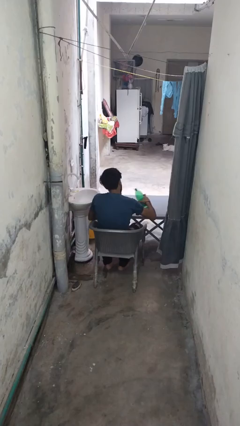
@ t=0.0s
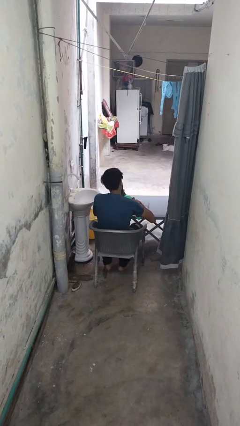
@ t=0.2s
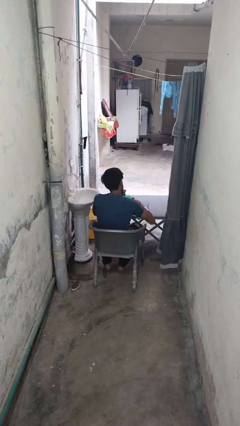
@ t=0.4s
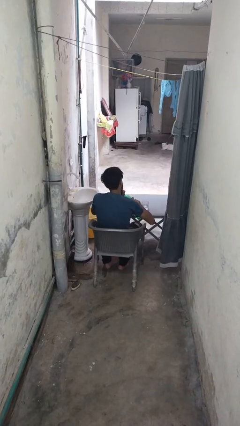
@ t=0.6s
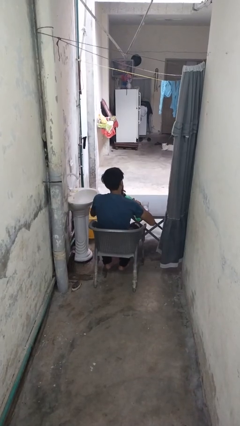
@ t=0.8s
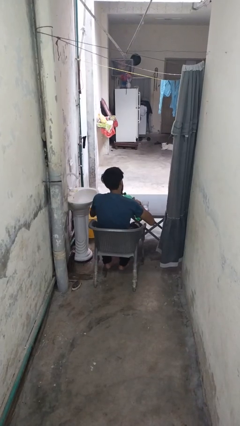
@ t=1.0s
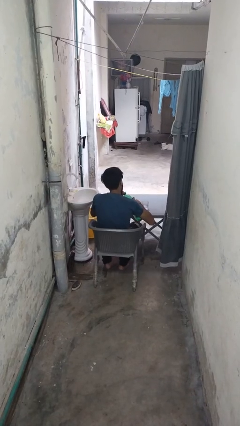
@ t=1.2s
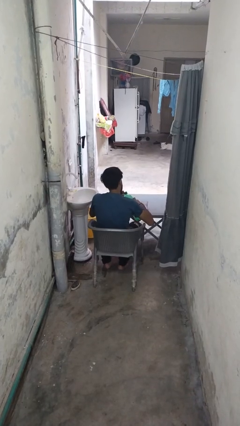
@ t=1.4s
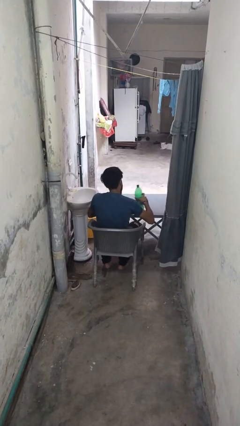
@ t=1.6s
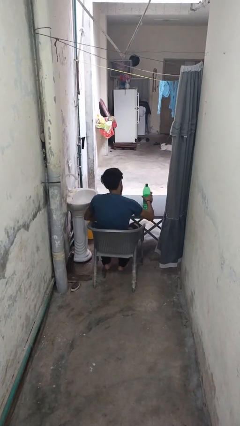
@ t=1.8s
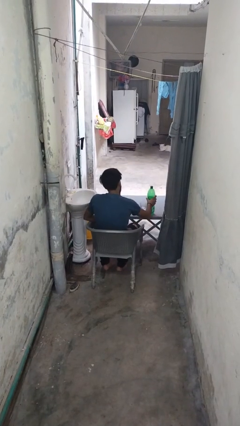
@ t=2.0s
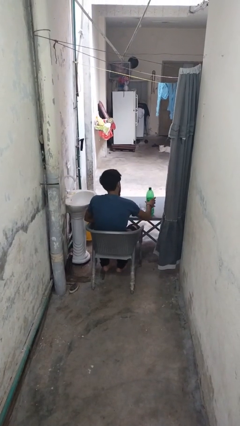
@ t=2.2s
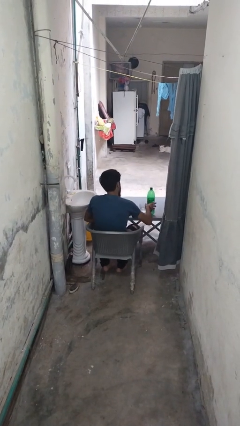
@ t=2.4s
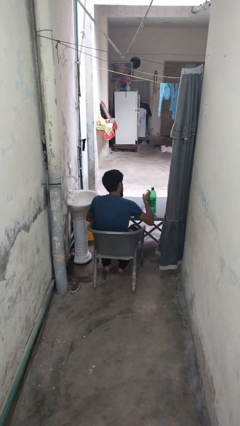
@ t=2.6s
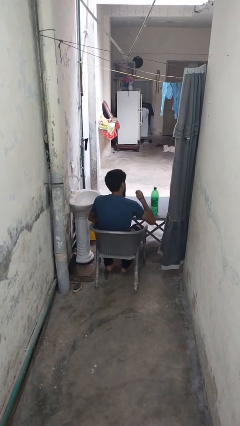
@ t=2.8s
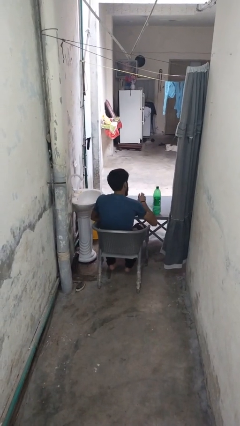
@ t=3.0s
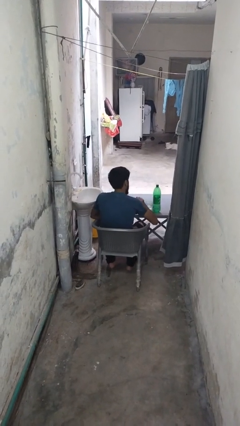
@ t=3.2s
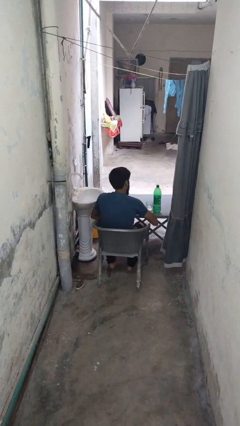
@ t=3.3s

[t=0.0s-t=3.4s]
person screws lid to bottle

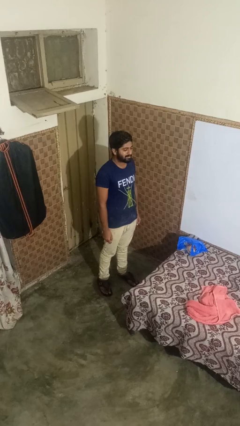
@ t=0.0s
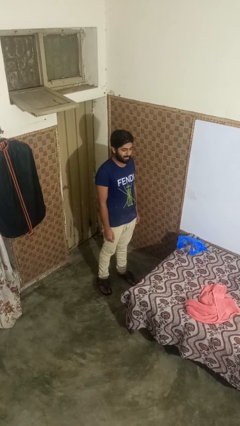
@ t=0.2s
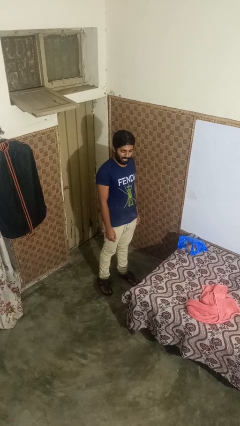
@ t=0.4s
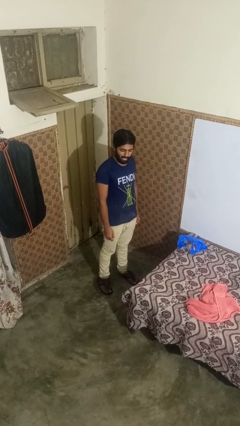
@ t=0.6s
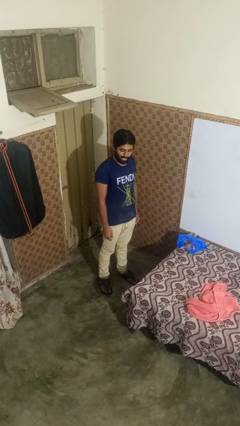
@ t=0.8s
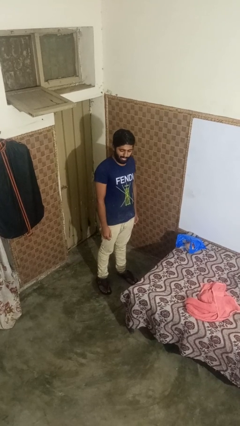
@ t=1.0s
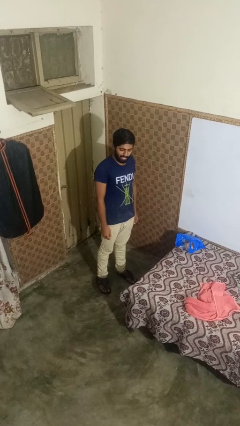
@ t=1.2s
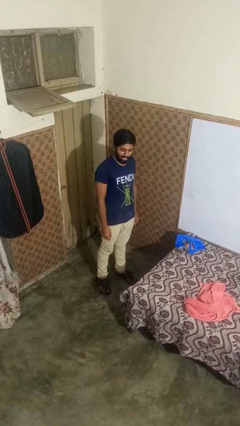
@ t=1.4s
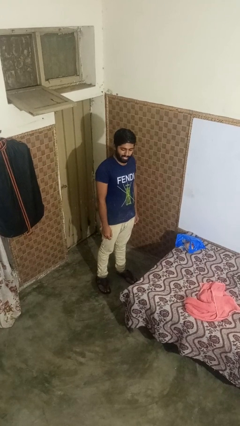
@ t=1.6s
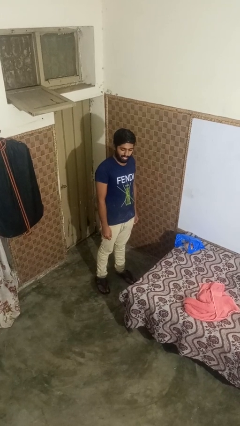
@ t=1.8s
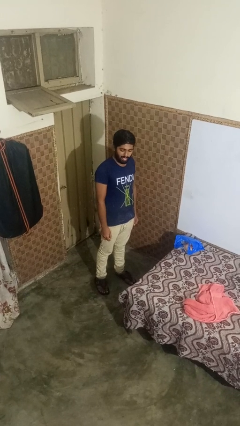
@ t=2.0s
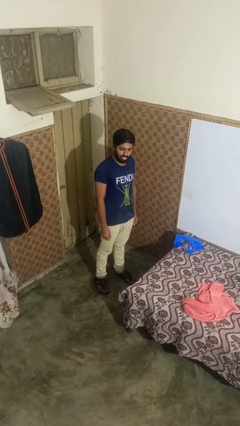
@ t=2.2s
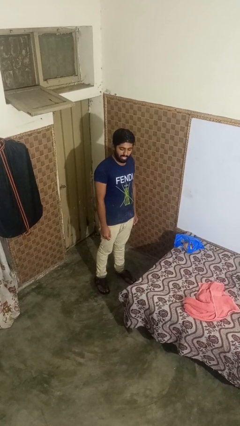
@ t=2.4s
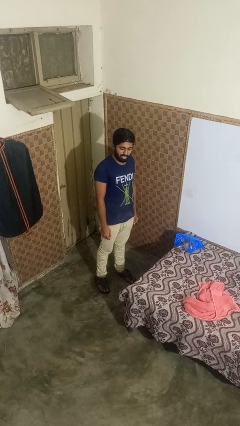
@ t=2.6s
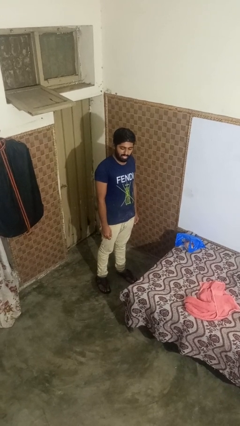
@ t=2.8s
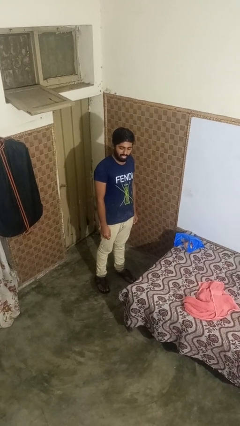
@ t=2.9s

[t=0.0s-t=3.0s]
person sticks out tongue

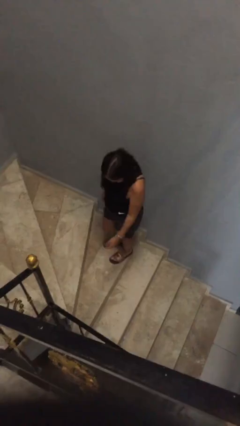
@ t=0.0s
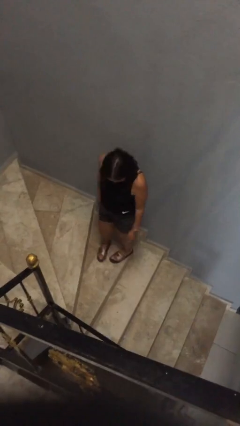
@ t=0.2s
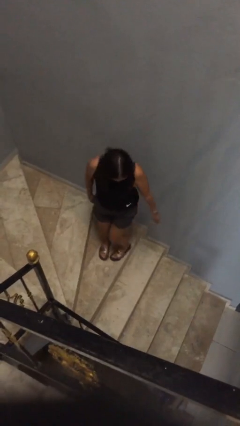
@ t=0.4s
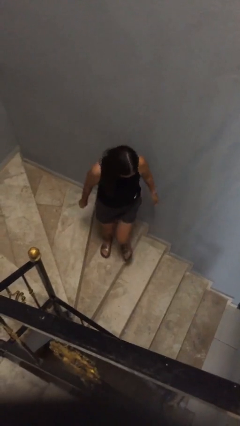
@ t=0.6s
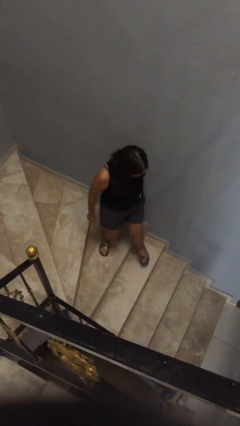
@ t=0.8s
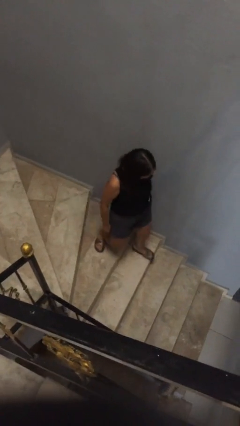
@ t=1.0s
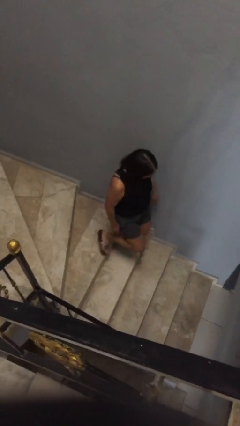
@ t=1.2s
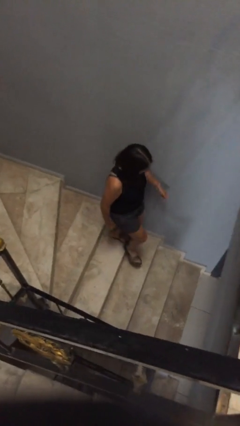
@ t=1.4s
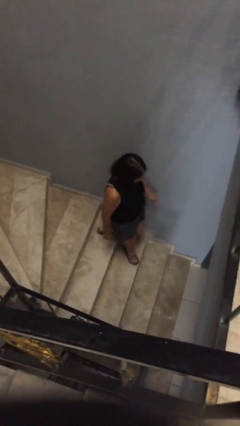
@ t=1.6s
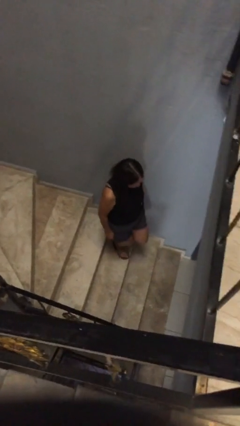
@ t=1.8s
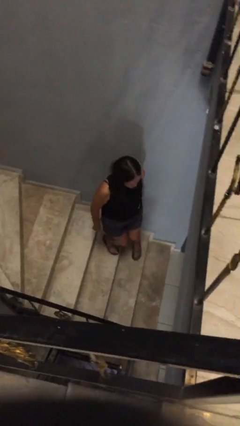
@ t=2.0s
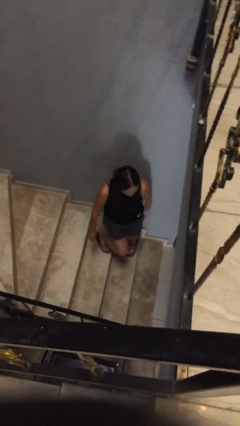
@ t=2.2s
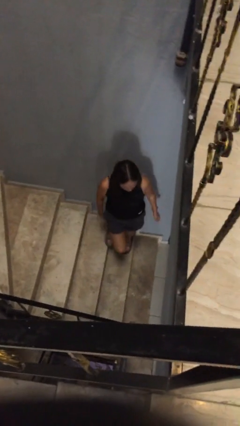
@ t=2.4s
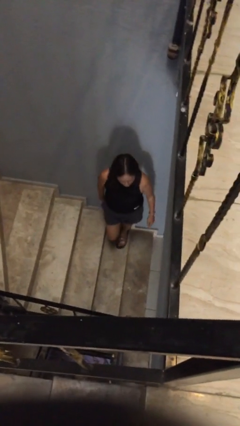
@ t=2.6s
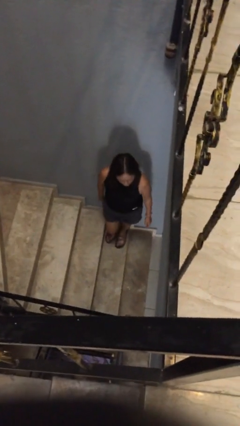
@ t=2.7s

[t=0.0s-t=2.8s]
person climbs down stairs

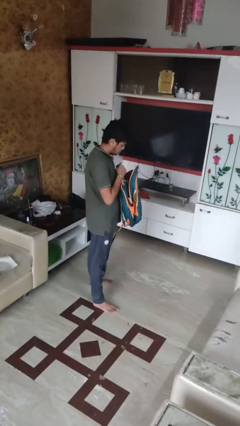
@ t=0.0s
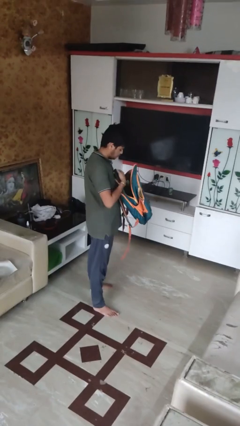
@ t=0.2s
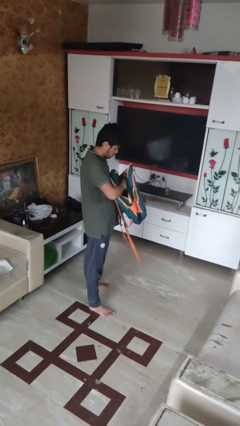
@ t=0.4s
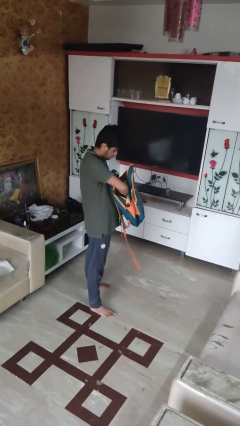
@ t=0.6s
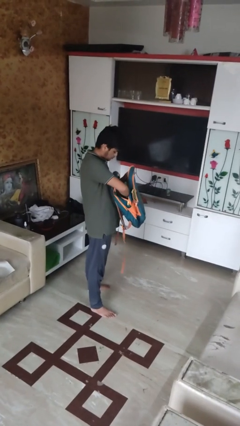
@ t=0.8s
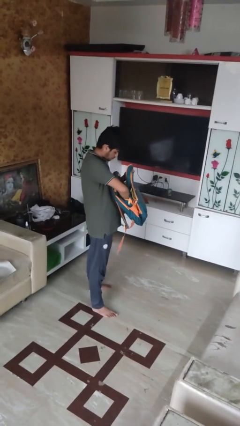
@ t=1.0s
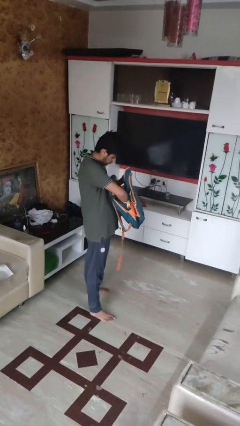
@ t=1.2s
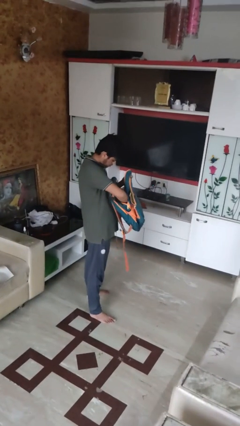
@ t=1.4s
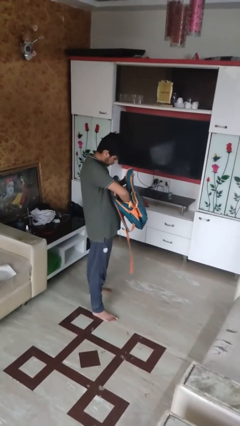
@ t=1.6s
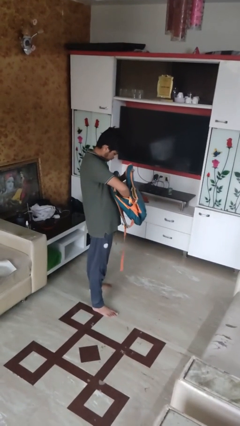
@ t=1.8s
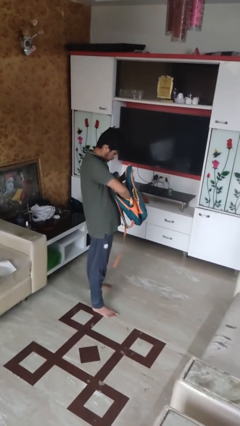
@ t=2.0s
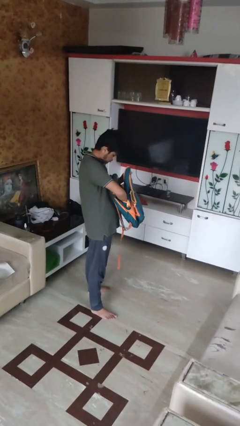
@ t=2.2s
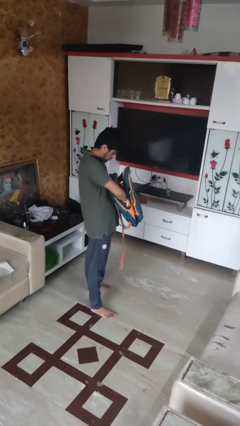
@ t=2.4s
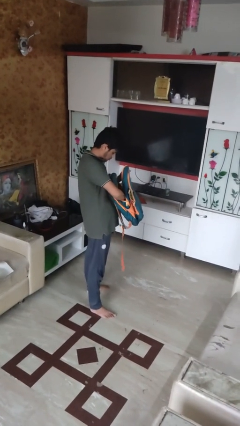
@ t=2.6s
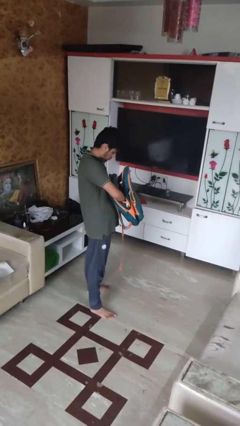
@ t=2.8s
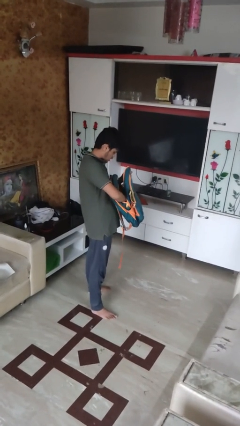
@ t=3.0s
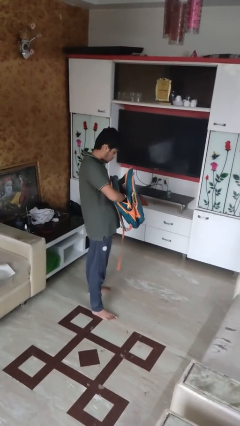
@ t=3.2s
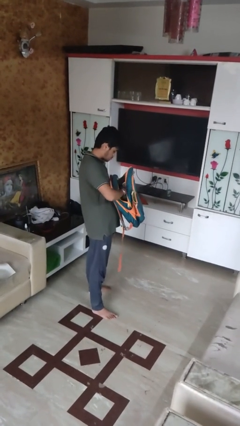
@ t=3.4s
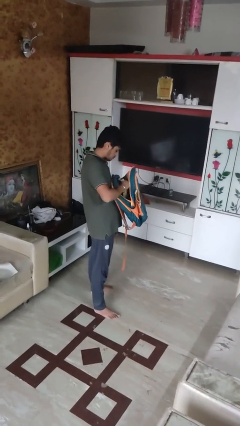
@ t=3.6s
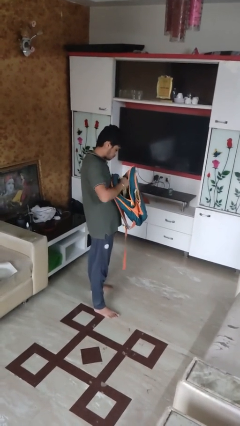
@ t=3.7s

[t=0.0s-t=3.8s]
person searches in backpack

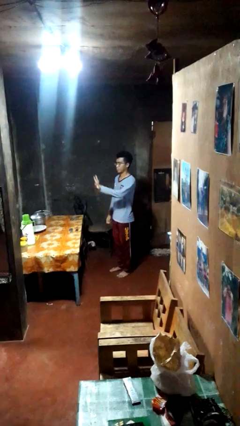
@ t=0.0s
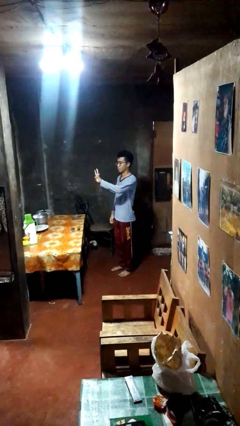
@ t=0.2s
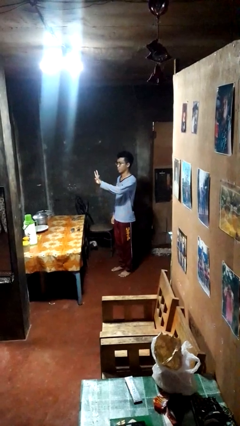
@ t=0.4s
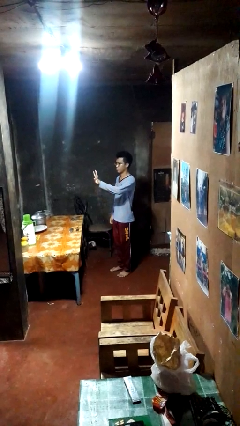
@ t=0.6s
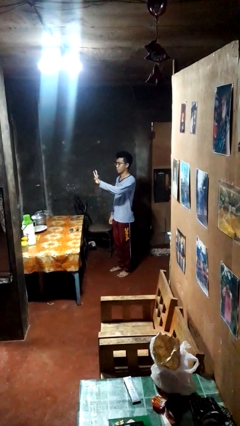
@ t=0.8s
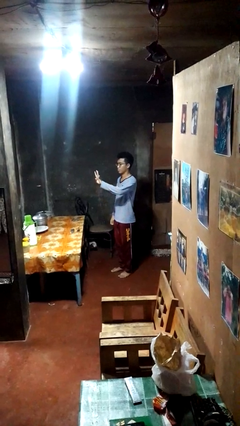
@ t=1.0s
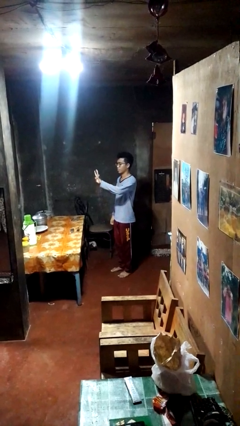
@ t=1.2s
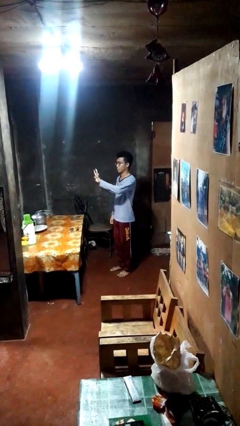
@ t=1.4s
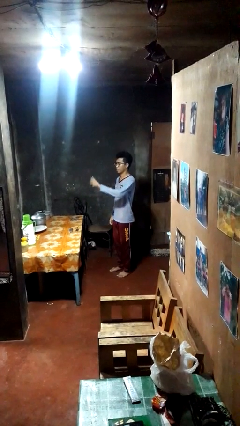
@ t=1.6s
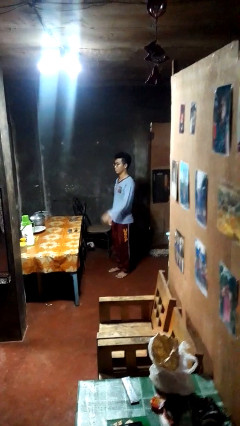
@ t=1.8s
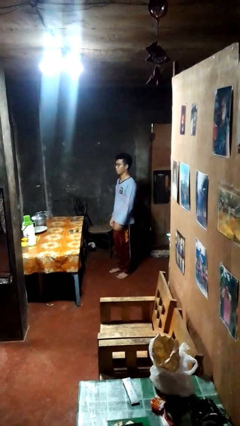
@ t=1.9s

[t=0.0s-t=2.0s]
person gestures number four

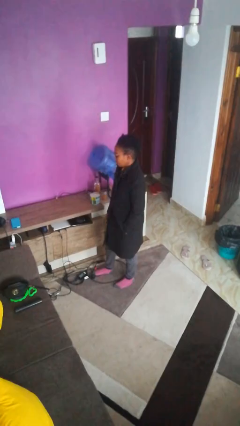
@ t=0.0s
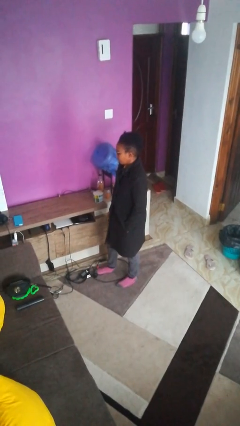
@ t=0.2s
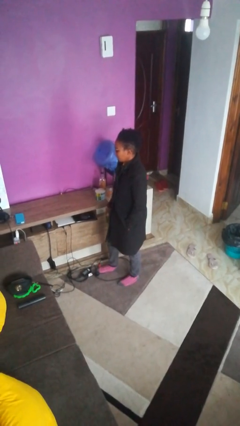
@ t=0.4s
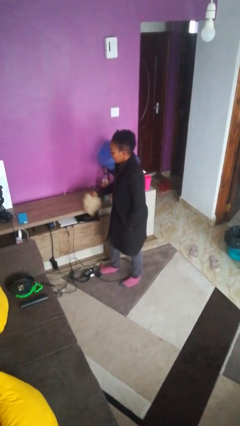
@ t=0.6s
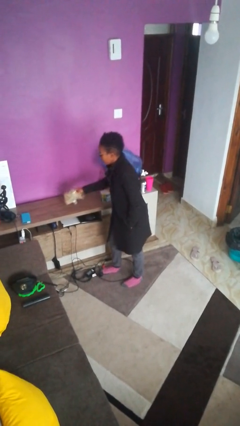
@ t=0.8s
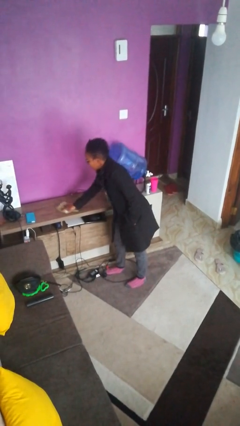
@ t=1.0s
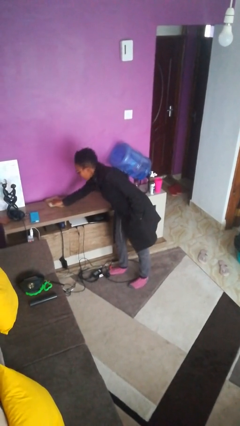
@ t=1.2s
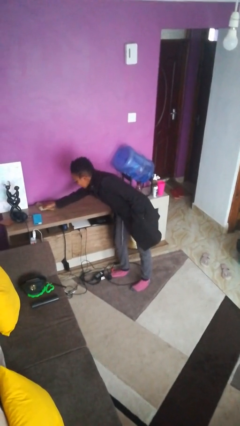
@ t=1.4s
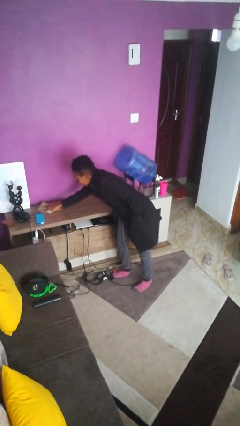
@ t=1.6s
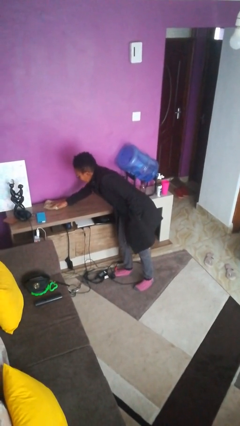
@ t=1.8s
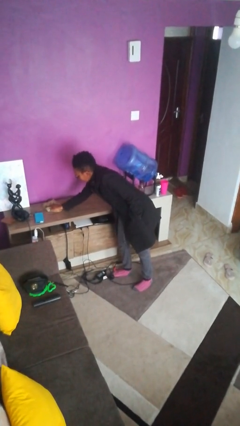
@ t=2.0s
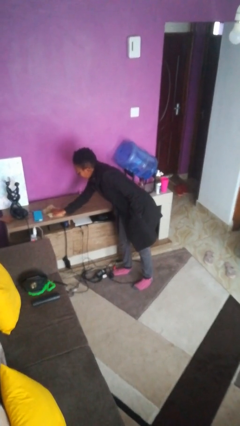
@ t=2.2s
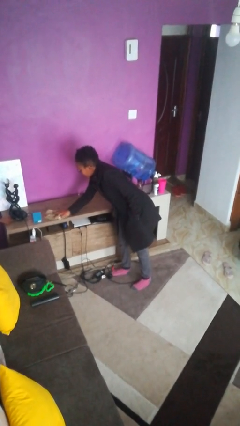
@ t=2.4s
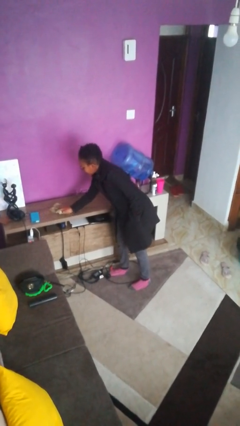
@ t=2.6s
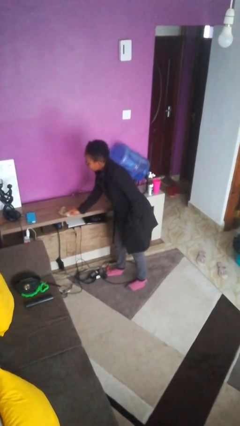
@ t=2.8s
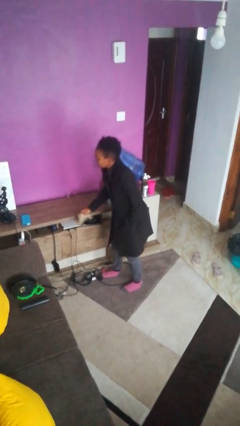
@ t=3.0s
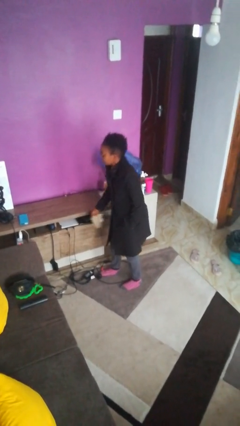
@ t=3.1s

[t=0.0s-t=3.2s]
person cleans table with rag
